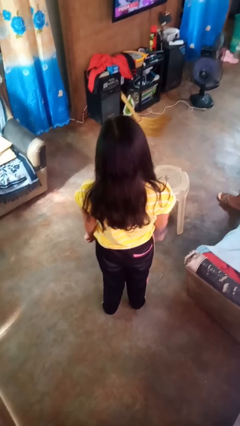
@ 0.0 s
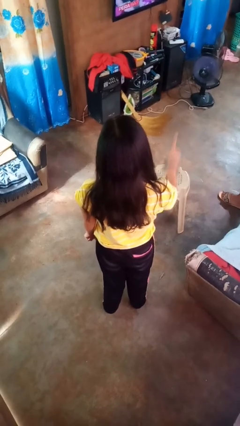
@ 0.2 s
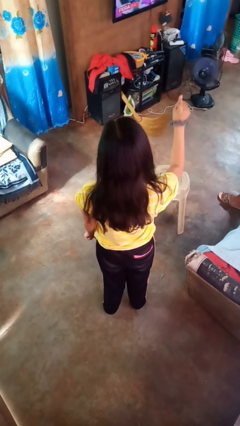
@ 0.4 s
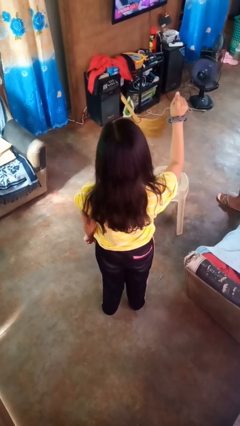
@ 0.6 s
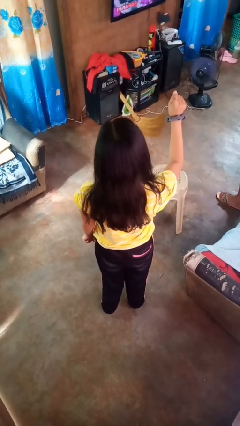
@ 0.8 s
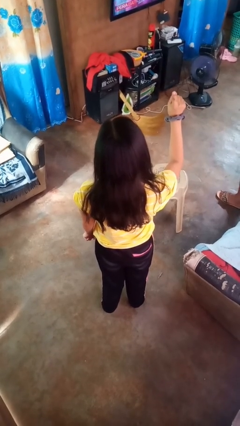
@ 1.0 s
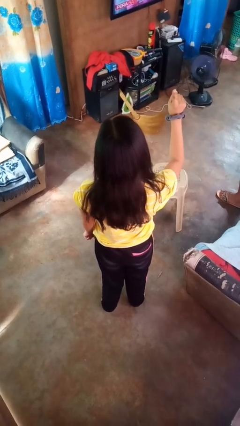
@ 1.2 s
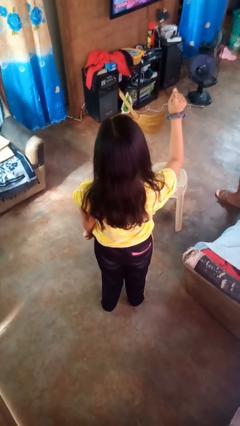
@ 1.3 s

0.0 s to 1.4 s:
person gestures number one

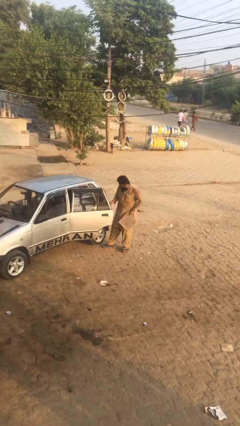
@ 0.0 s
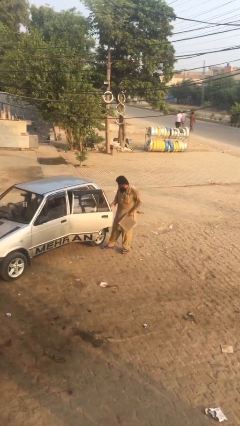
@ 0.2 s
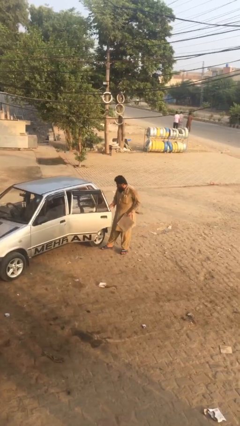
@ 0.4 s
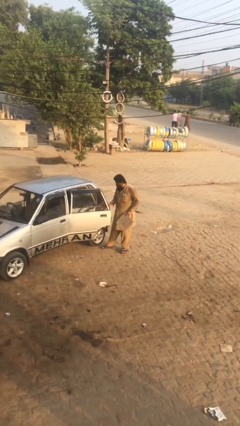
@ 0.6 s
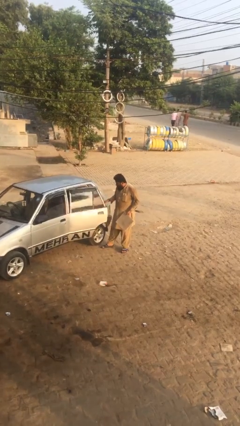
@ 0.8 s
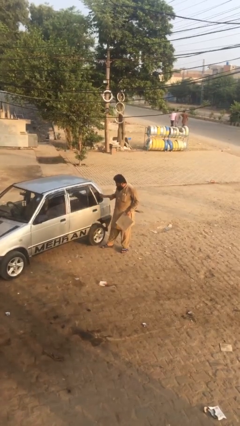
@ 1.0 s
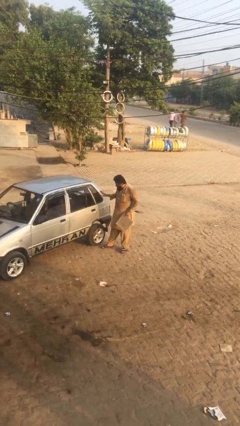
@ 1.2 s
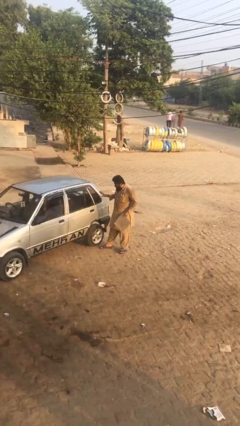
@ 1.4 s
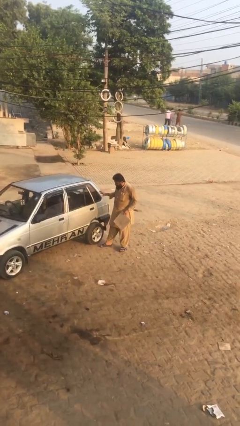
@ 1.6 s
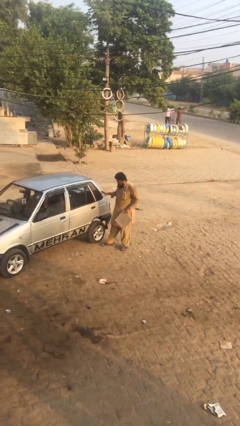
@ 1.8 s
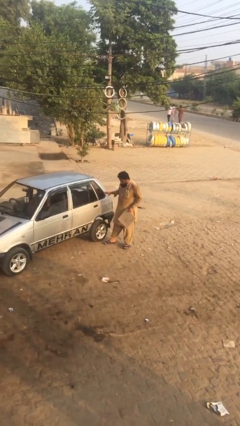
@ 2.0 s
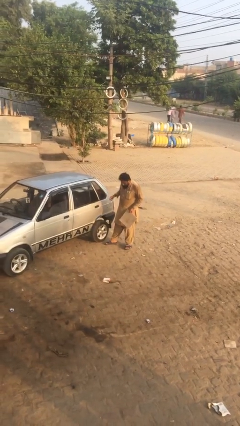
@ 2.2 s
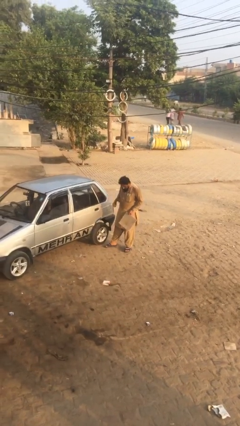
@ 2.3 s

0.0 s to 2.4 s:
person closes car door

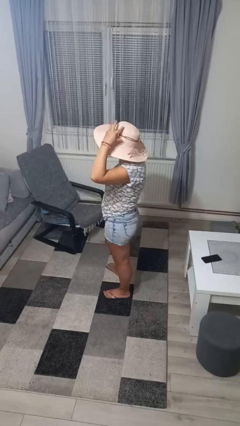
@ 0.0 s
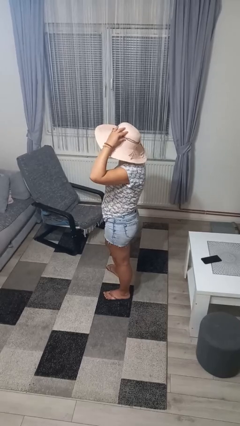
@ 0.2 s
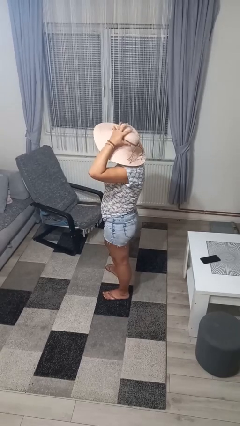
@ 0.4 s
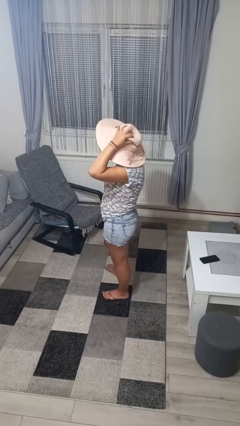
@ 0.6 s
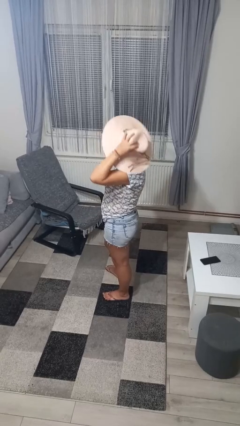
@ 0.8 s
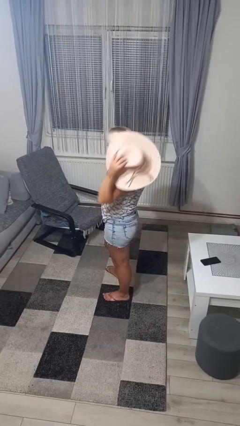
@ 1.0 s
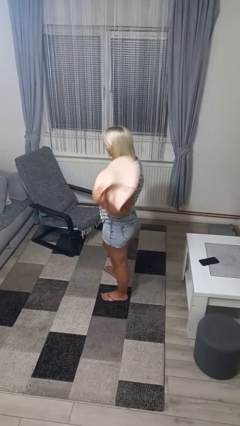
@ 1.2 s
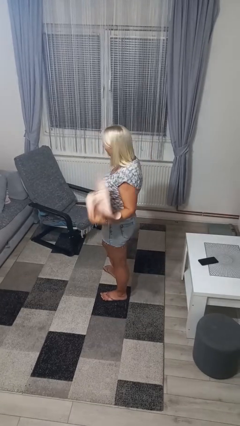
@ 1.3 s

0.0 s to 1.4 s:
person takes off hat

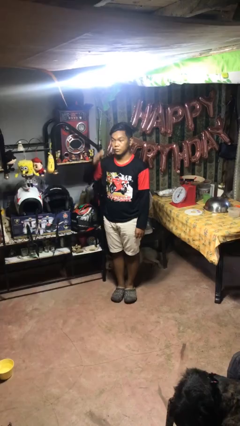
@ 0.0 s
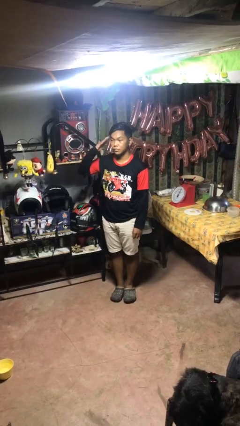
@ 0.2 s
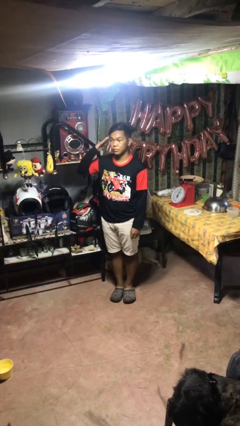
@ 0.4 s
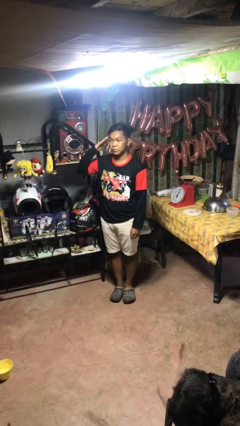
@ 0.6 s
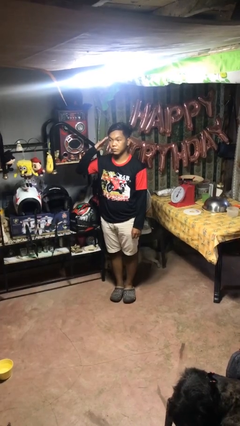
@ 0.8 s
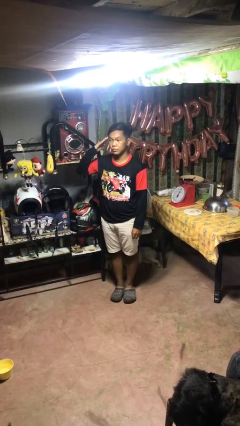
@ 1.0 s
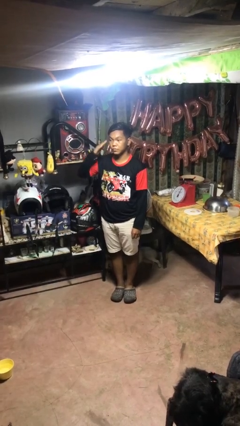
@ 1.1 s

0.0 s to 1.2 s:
person salutes

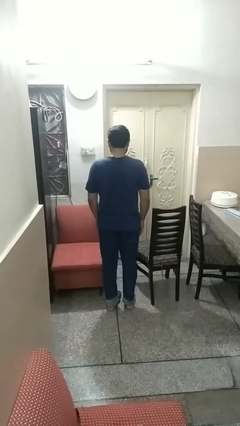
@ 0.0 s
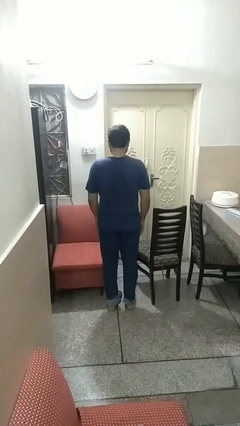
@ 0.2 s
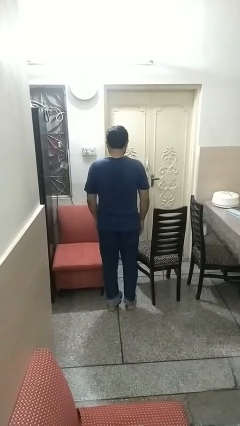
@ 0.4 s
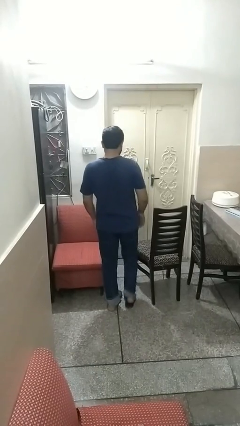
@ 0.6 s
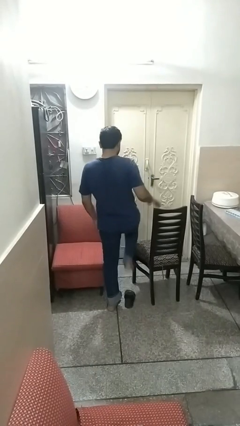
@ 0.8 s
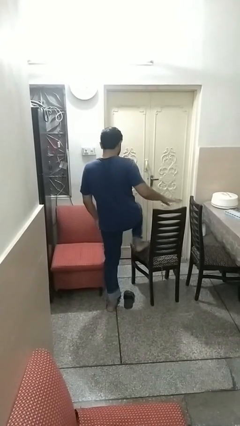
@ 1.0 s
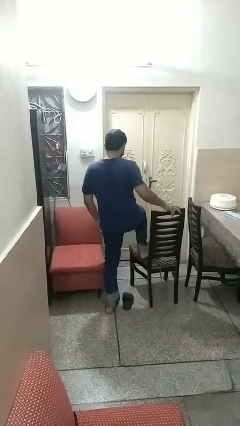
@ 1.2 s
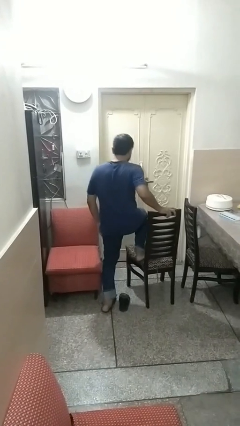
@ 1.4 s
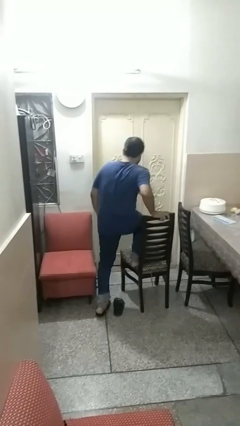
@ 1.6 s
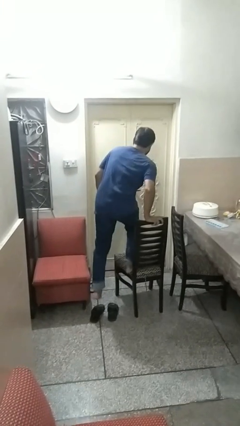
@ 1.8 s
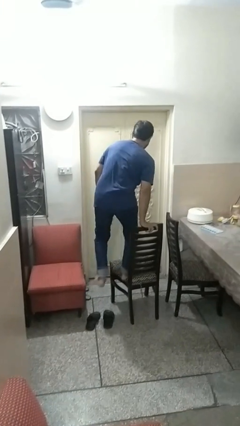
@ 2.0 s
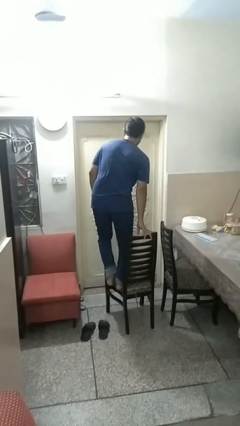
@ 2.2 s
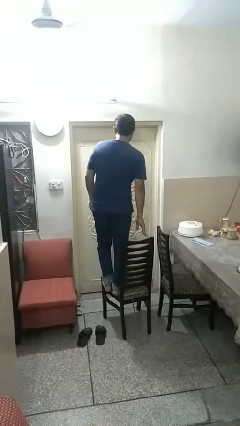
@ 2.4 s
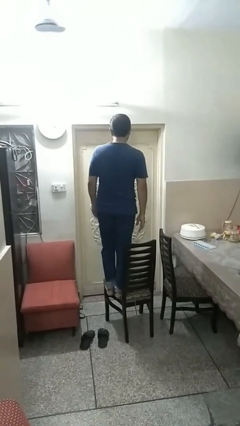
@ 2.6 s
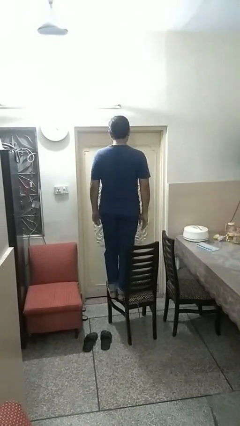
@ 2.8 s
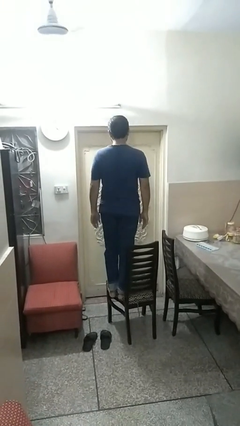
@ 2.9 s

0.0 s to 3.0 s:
person climbs on chair

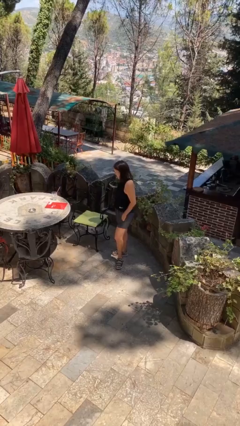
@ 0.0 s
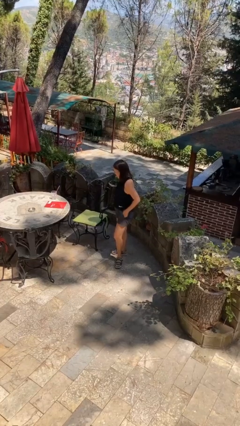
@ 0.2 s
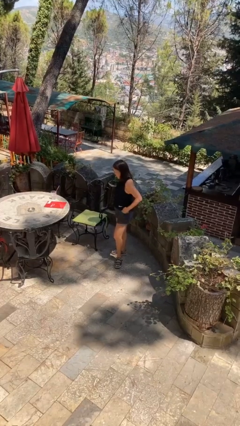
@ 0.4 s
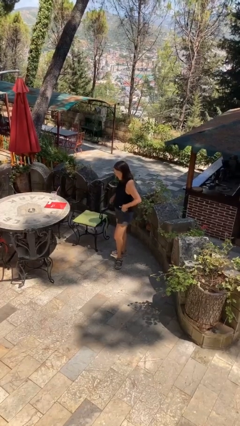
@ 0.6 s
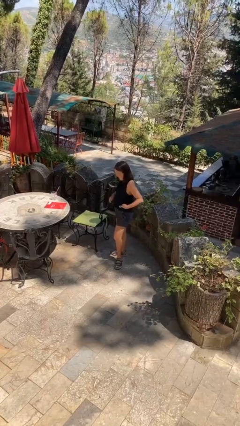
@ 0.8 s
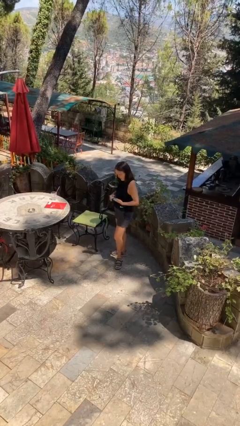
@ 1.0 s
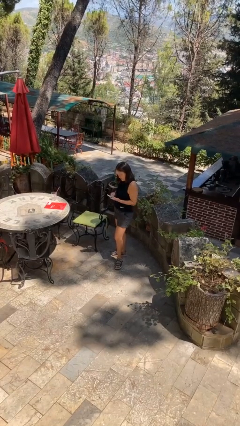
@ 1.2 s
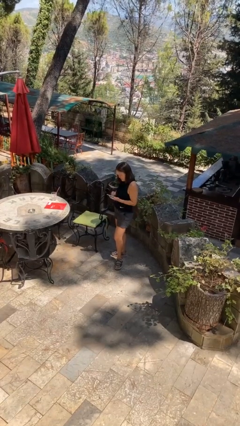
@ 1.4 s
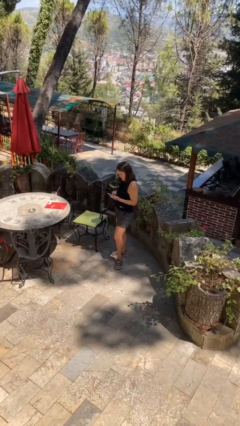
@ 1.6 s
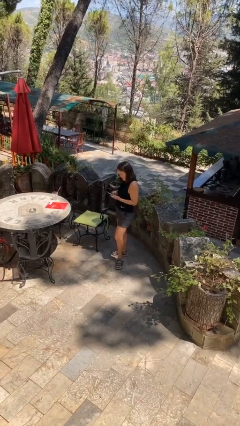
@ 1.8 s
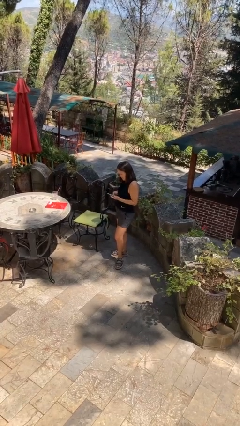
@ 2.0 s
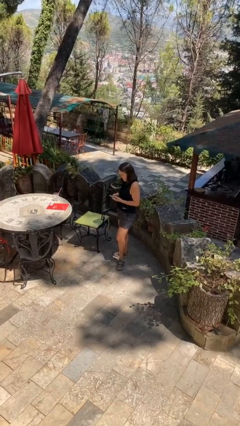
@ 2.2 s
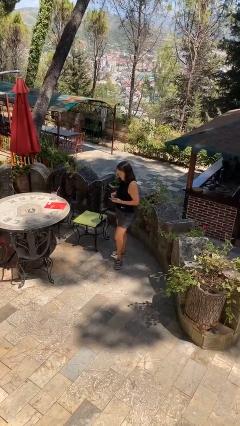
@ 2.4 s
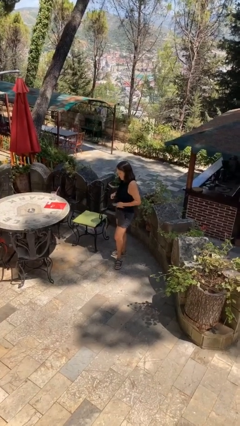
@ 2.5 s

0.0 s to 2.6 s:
person takes phone from pocket

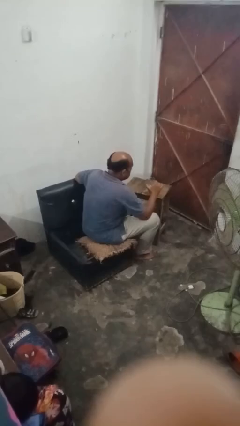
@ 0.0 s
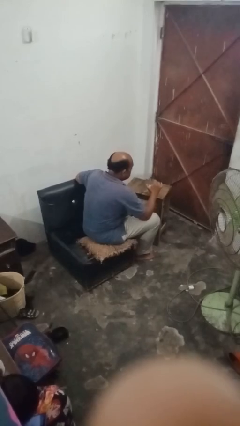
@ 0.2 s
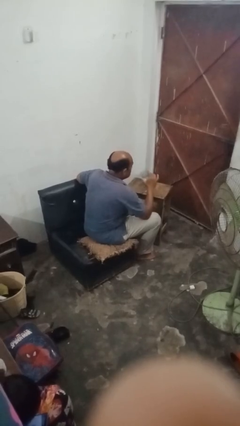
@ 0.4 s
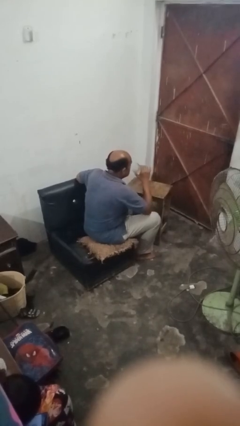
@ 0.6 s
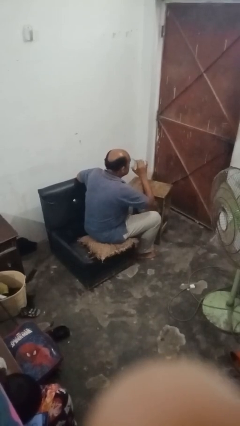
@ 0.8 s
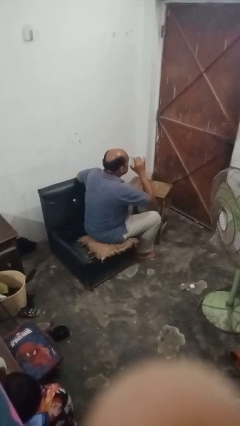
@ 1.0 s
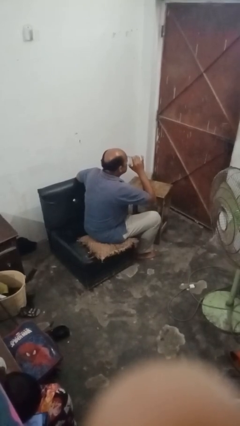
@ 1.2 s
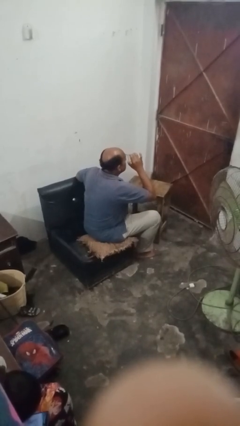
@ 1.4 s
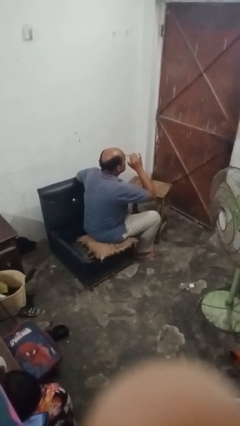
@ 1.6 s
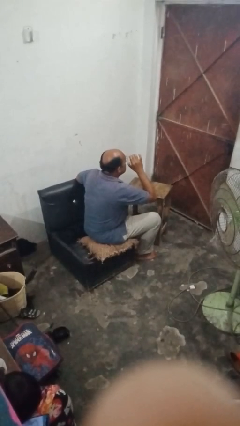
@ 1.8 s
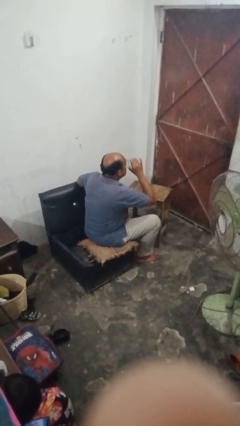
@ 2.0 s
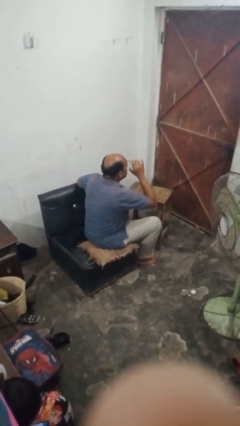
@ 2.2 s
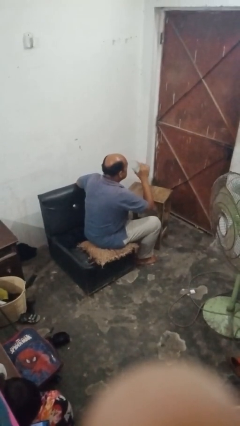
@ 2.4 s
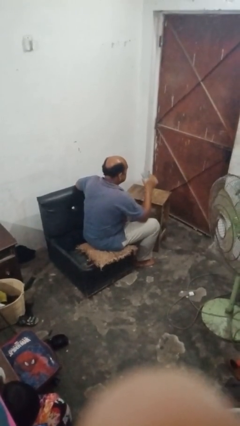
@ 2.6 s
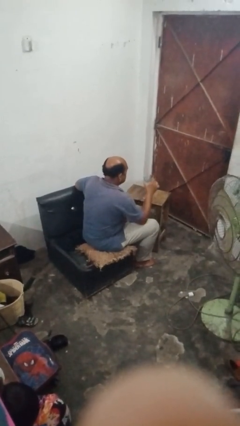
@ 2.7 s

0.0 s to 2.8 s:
person drinks from shotglass

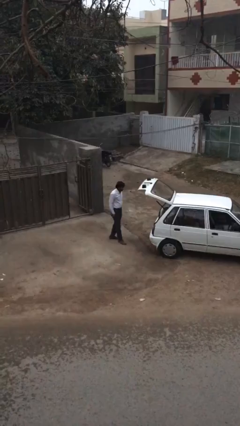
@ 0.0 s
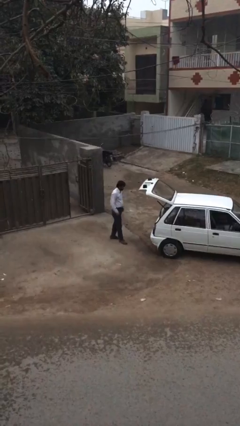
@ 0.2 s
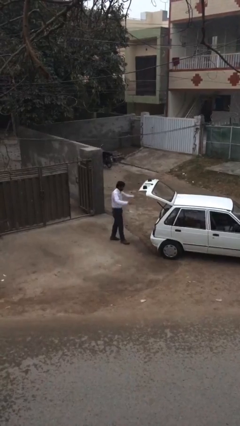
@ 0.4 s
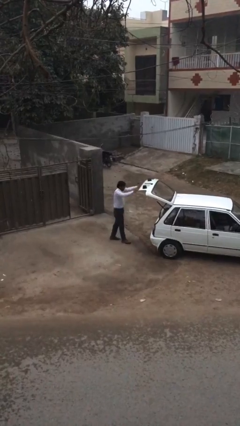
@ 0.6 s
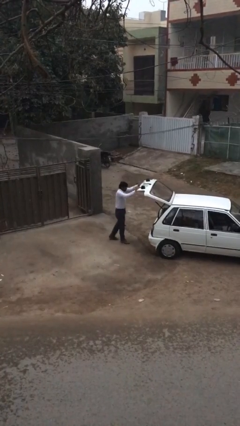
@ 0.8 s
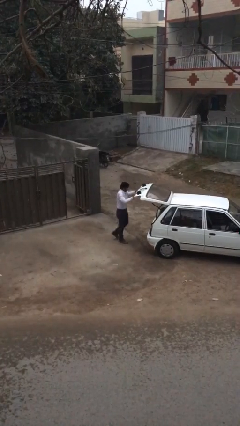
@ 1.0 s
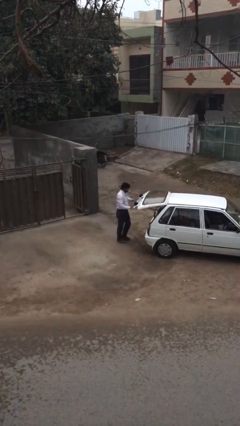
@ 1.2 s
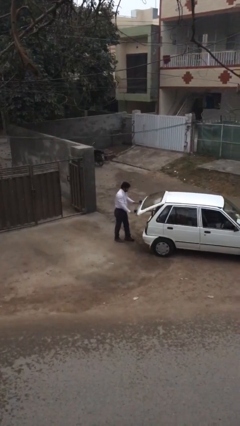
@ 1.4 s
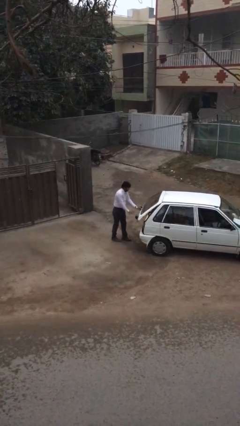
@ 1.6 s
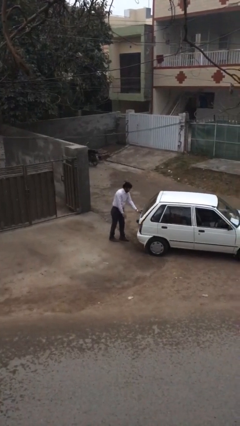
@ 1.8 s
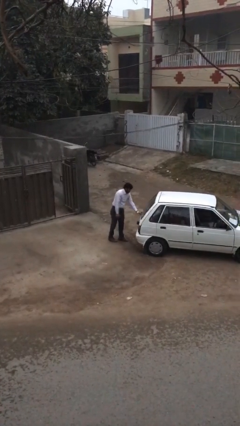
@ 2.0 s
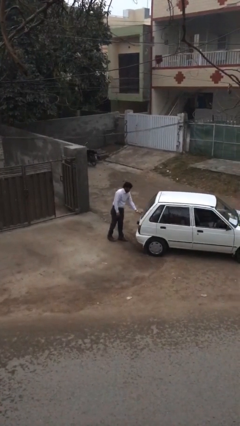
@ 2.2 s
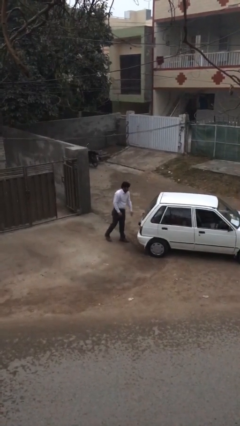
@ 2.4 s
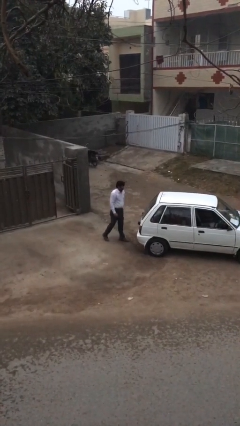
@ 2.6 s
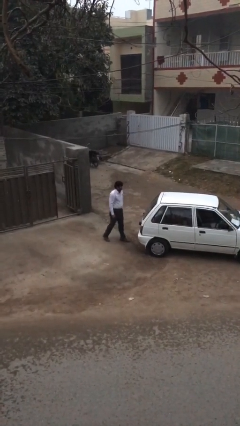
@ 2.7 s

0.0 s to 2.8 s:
person closes car trunk
